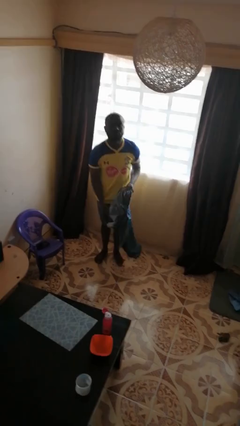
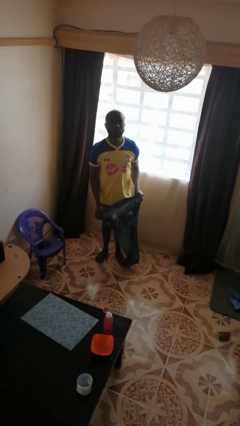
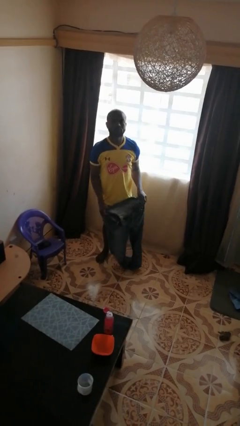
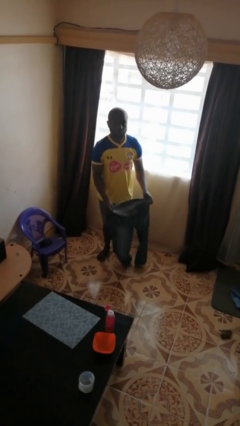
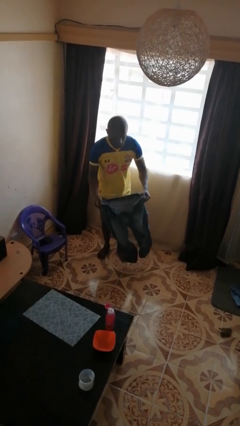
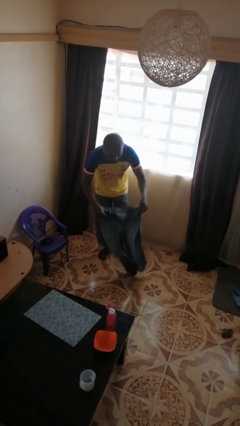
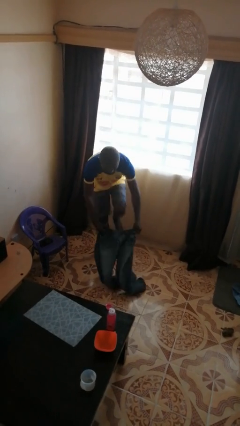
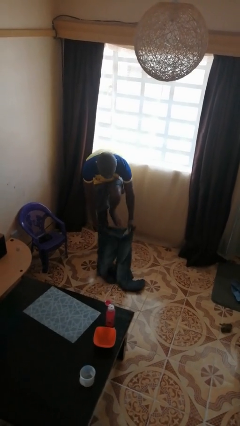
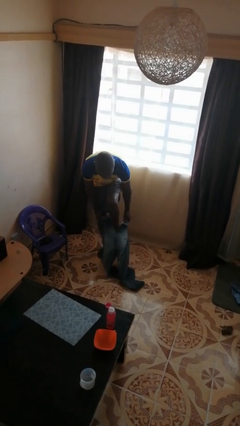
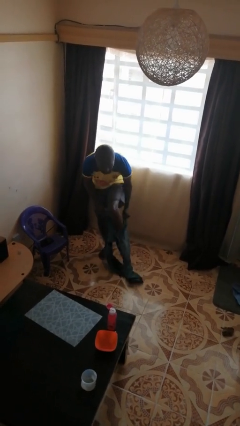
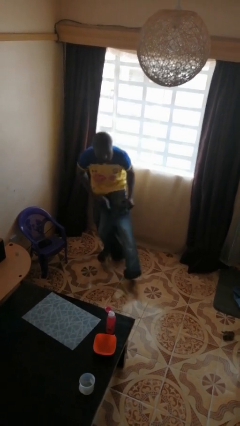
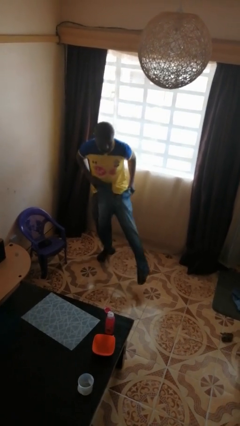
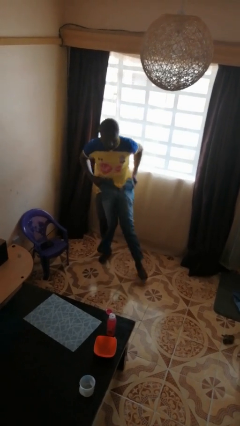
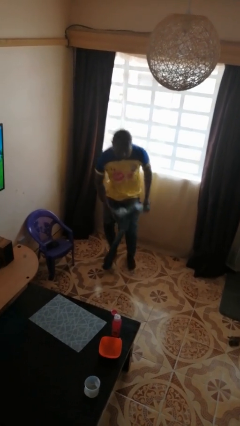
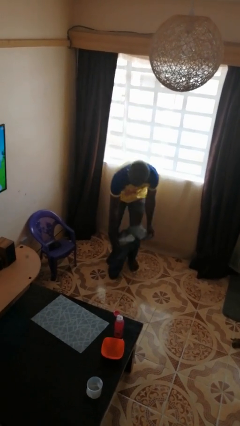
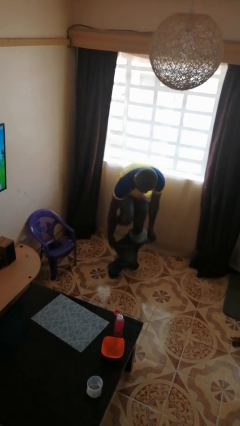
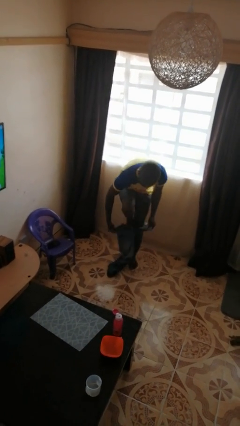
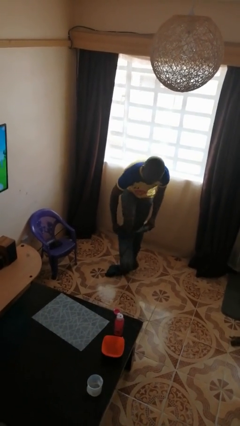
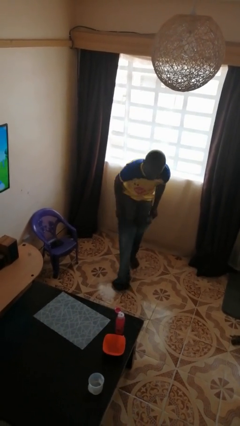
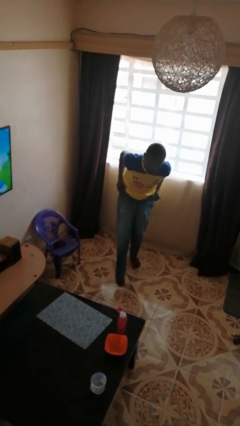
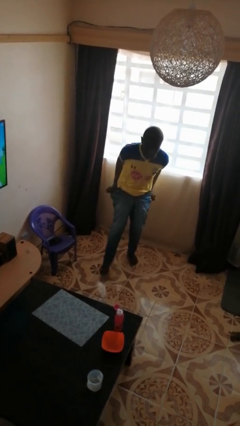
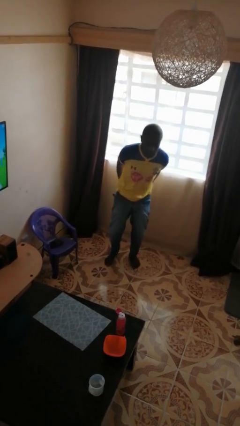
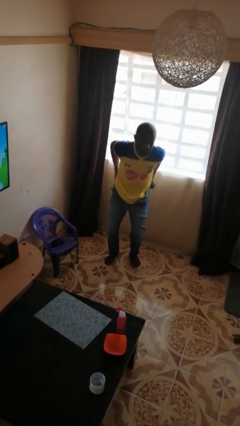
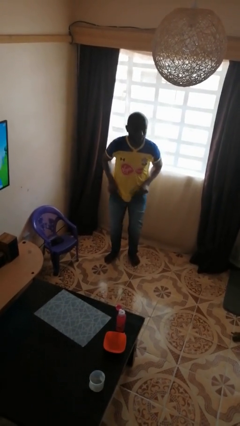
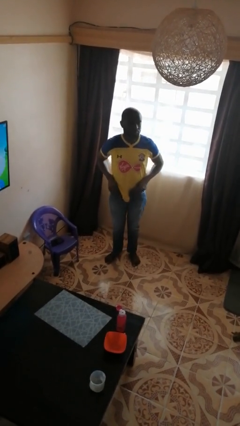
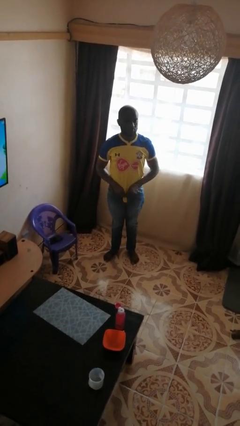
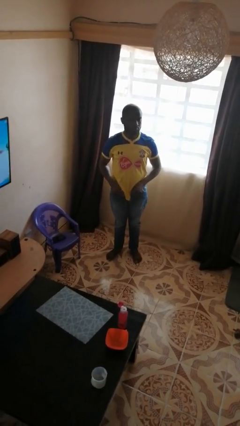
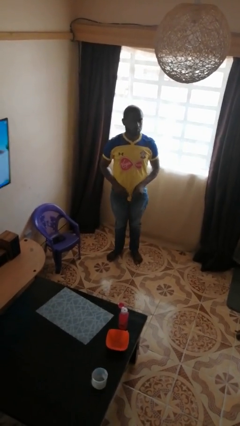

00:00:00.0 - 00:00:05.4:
person puts on pants

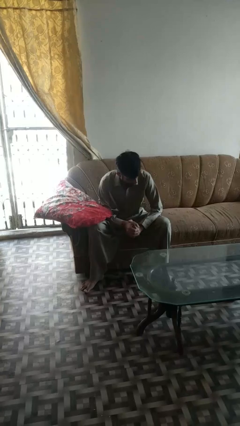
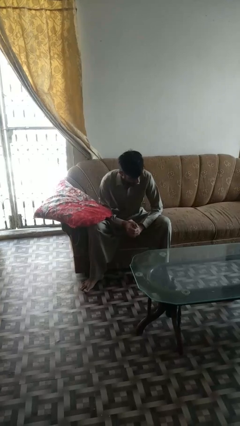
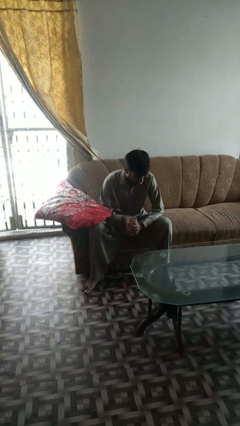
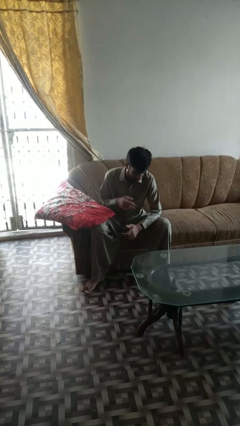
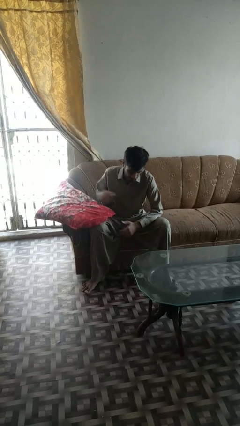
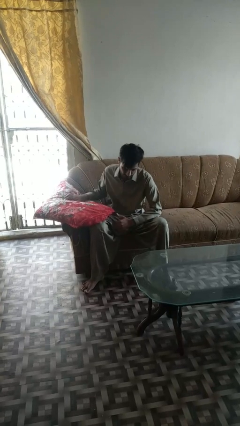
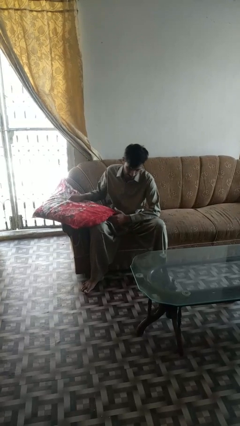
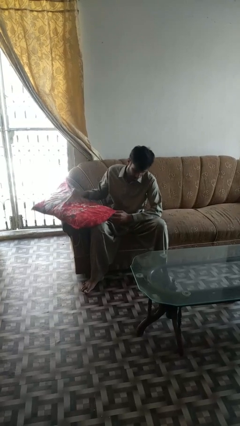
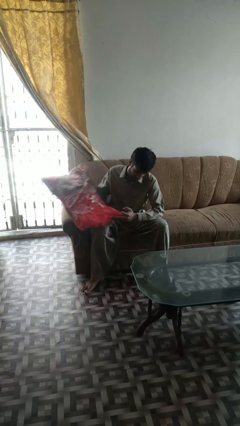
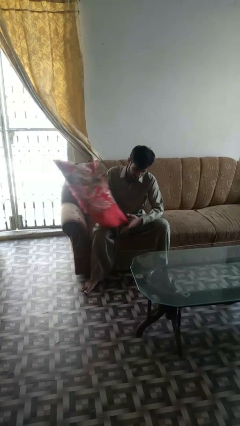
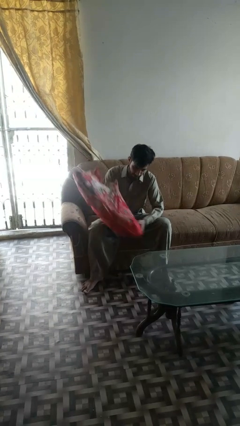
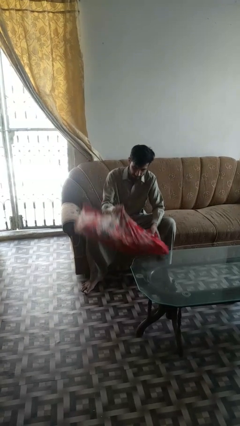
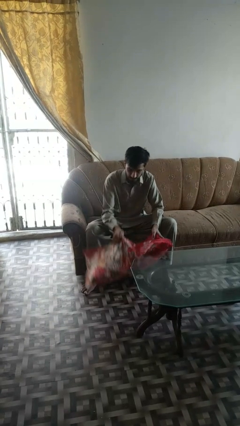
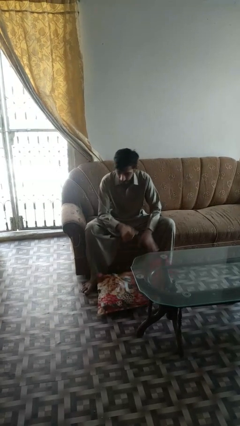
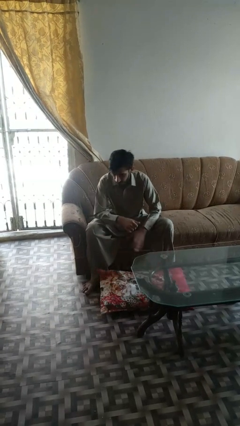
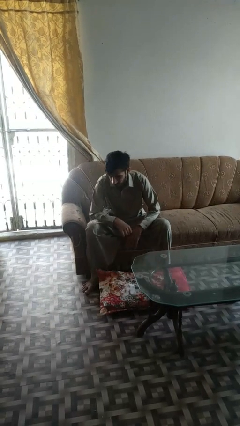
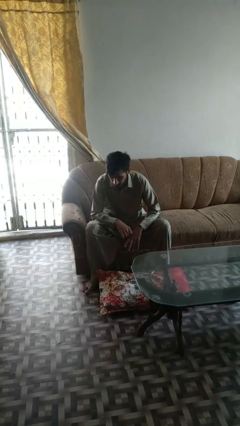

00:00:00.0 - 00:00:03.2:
person drops object

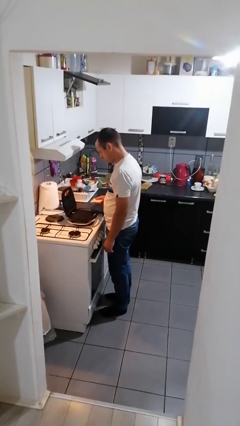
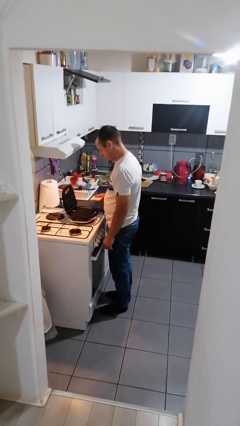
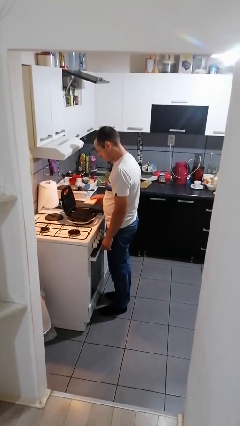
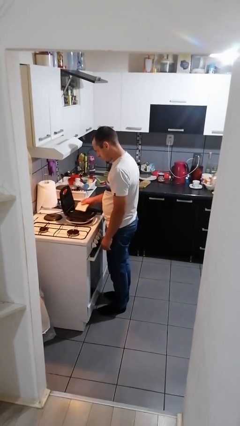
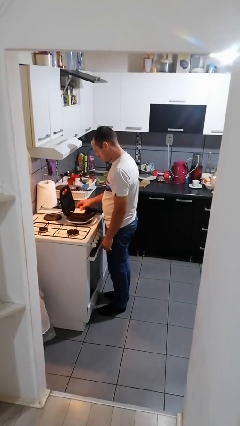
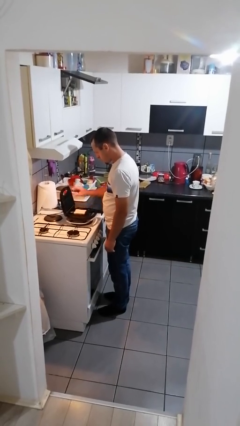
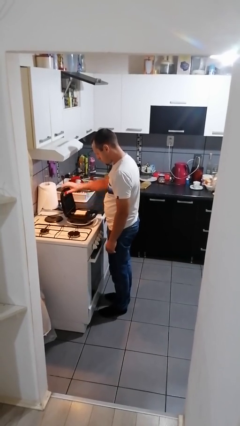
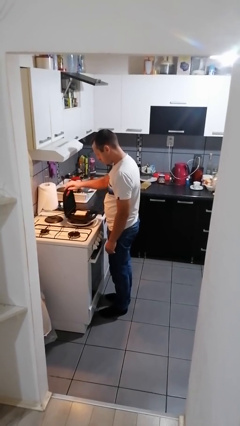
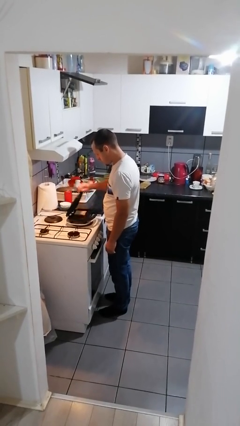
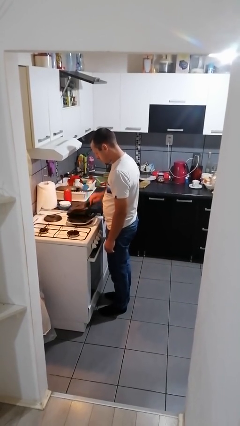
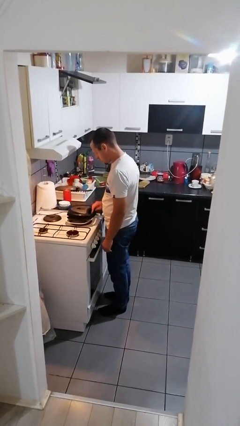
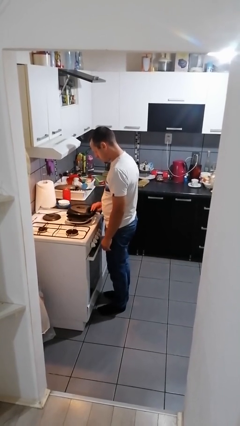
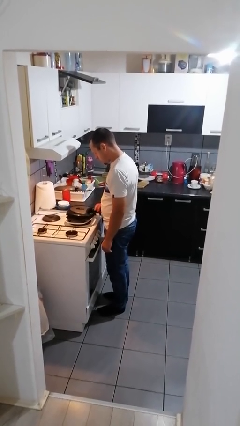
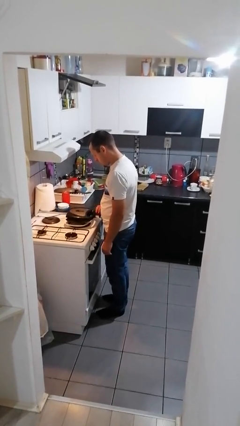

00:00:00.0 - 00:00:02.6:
person puts object into toaster

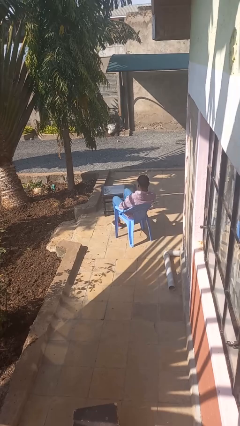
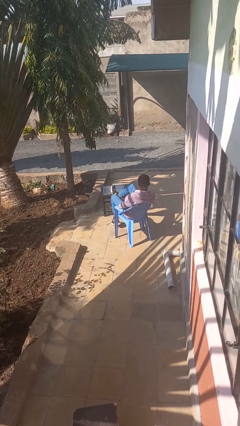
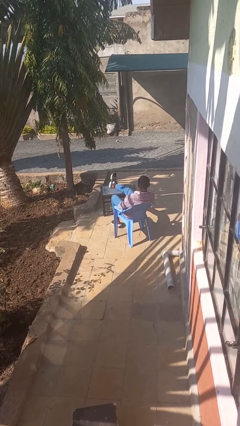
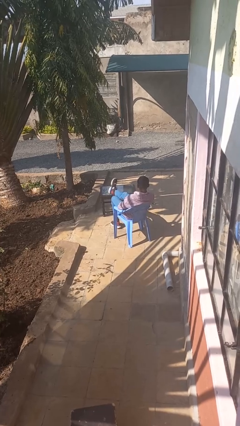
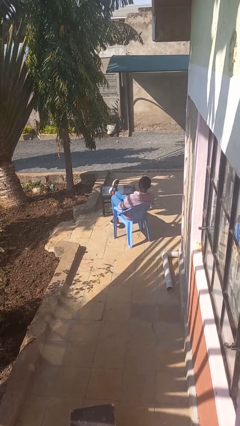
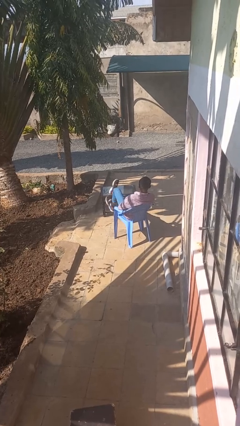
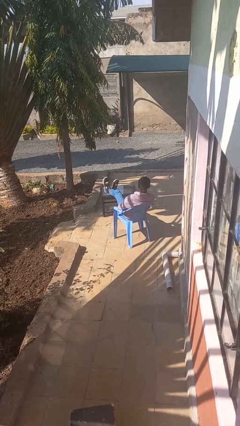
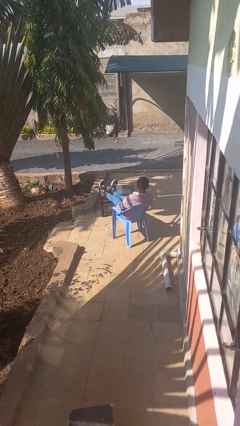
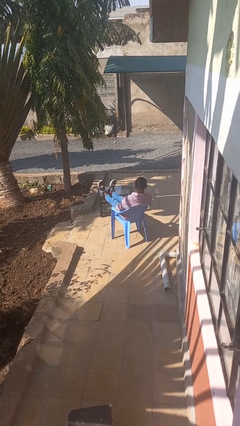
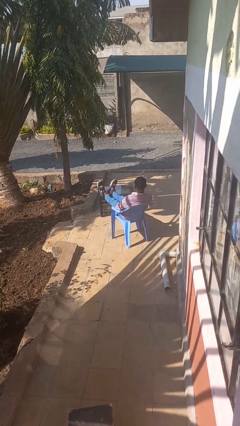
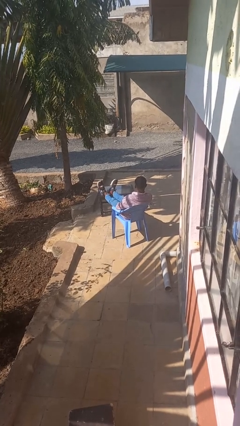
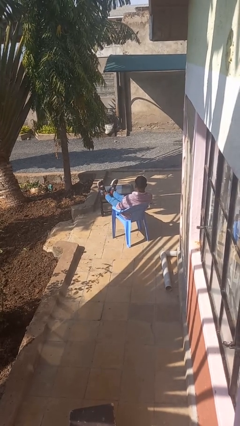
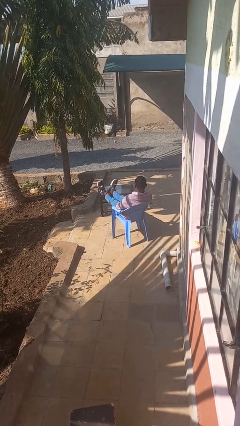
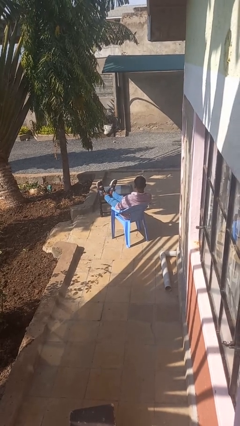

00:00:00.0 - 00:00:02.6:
person puts feet up

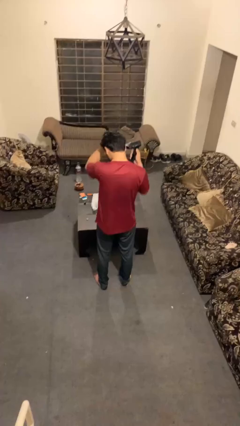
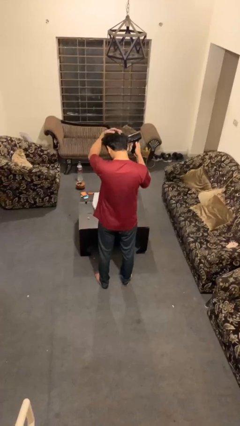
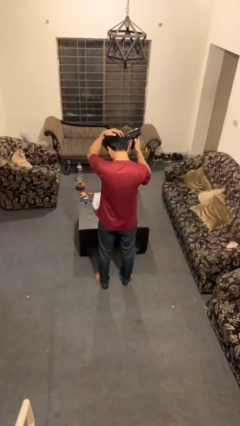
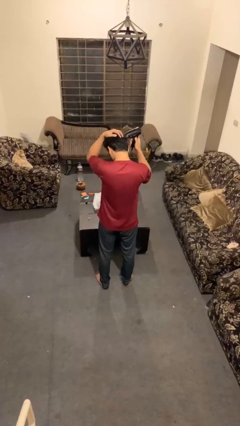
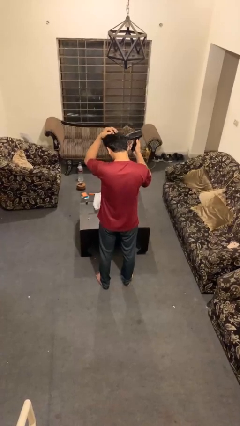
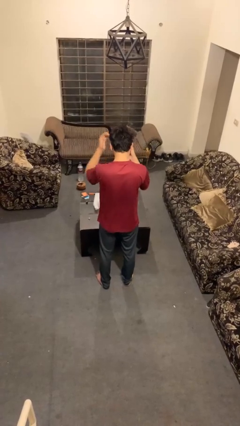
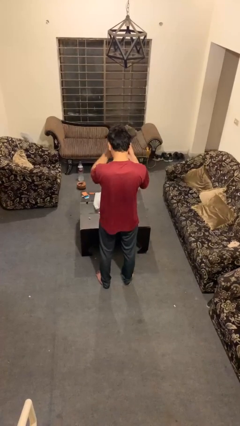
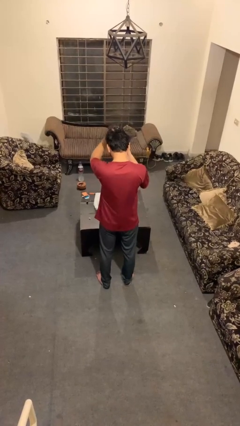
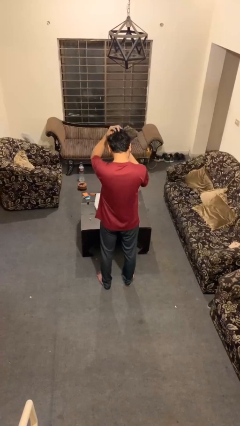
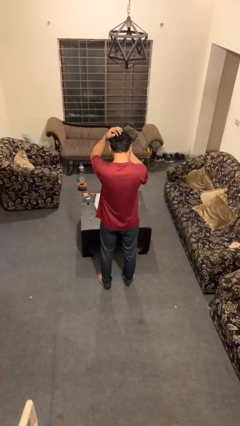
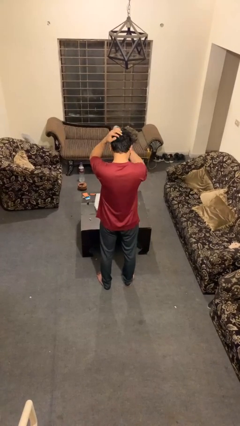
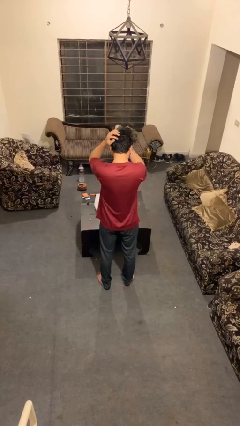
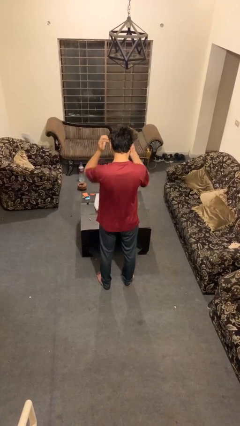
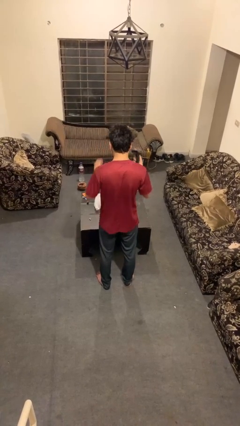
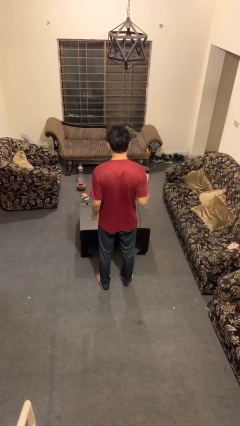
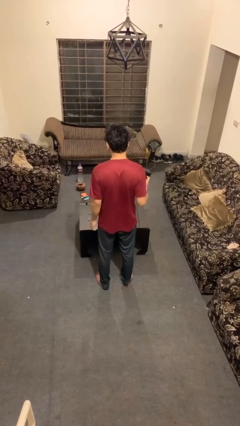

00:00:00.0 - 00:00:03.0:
person dries hair with hairdryer
